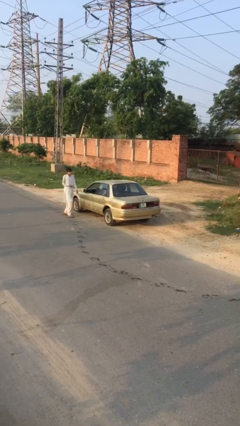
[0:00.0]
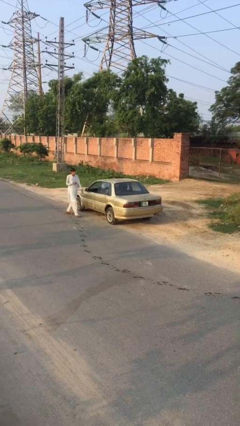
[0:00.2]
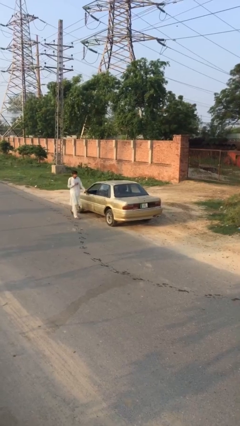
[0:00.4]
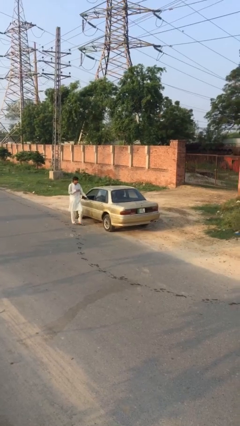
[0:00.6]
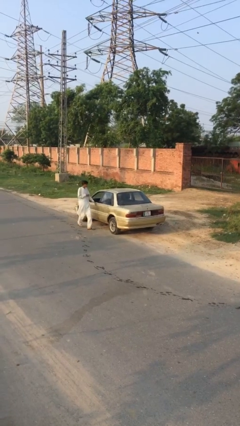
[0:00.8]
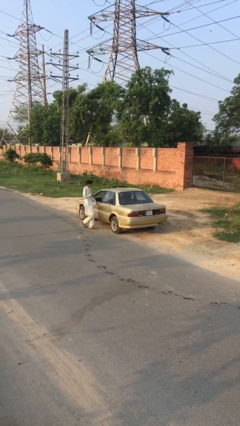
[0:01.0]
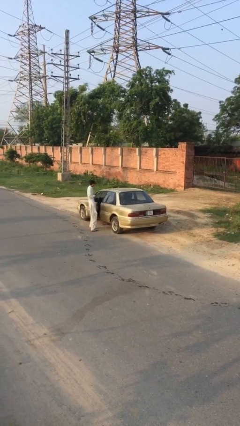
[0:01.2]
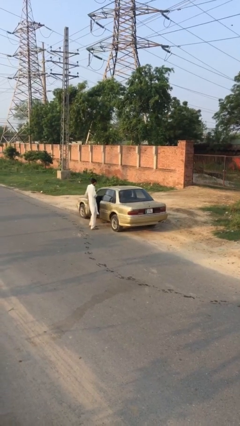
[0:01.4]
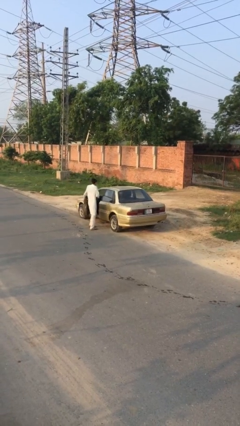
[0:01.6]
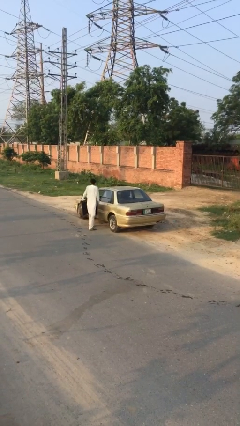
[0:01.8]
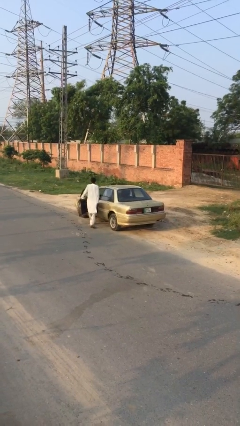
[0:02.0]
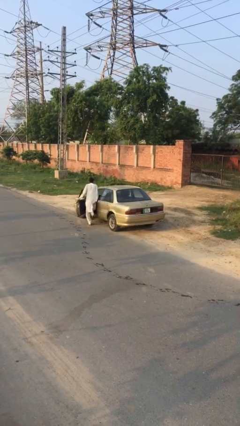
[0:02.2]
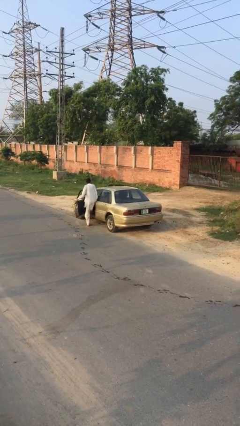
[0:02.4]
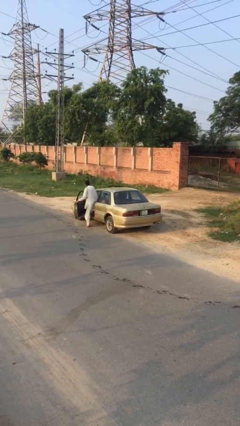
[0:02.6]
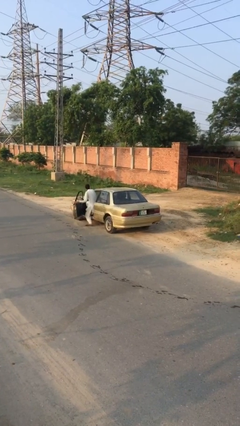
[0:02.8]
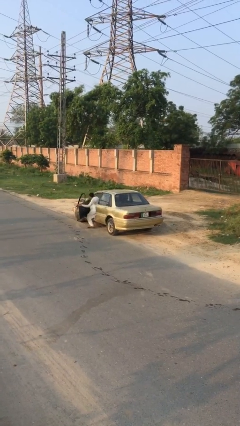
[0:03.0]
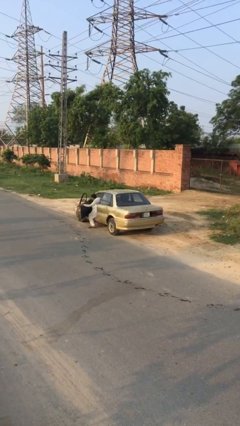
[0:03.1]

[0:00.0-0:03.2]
car picks up person

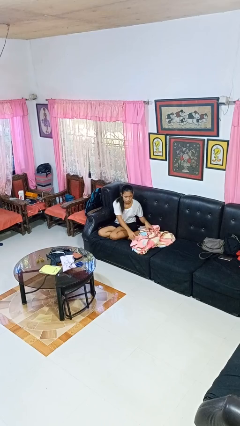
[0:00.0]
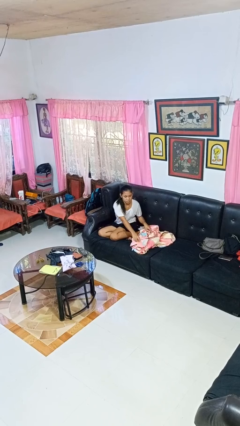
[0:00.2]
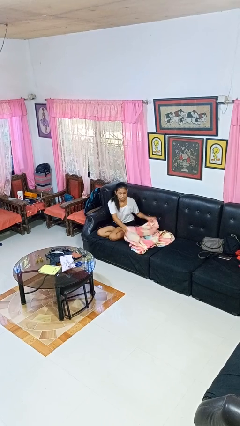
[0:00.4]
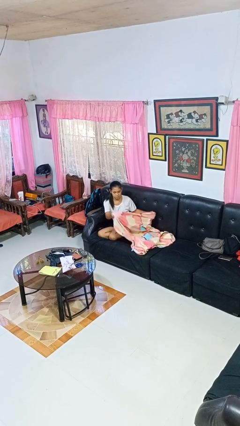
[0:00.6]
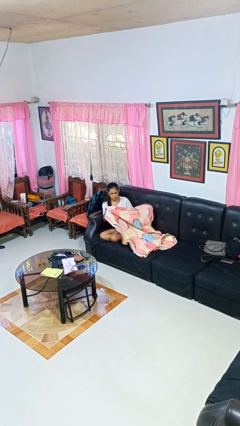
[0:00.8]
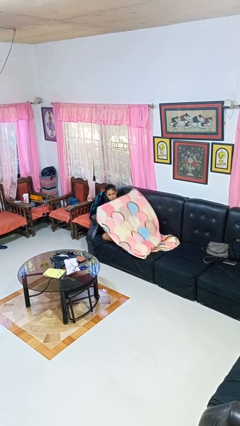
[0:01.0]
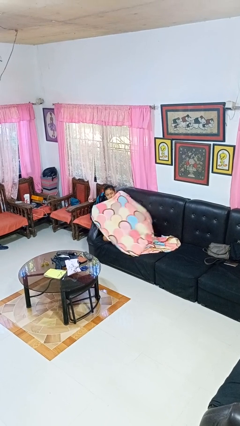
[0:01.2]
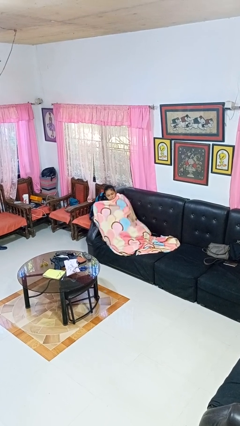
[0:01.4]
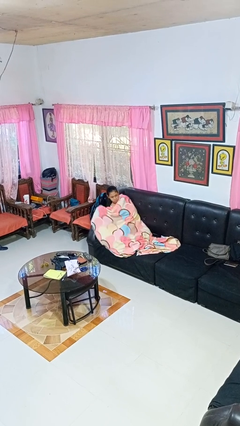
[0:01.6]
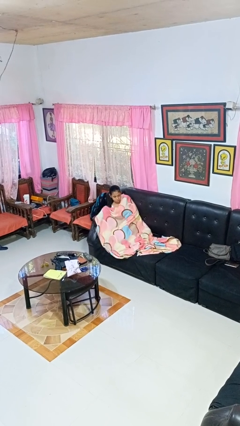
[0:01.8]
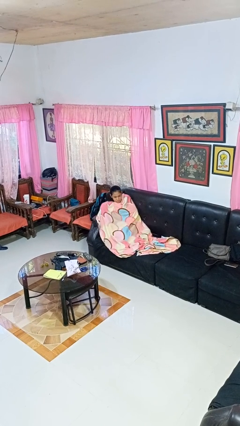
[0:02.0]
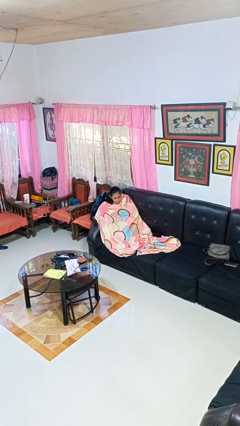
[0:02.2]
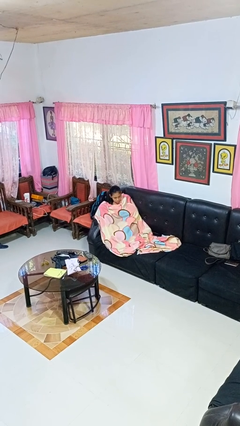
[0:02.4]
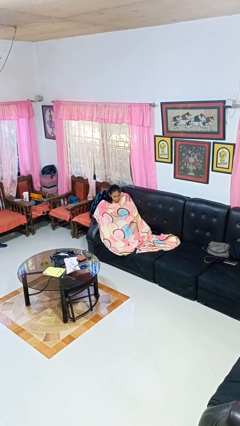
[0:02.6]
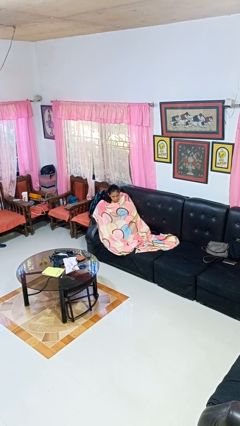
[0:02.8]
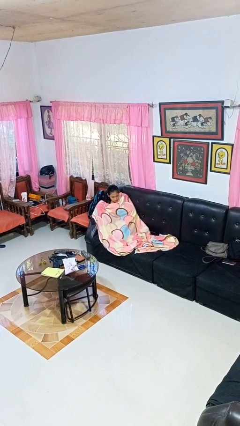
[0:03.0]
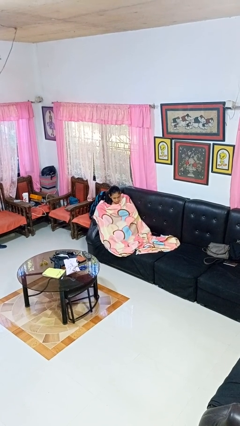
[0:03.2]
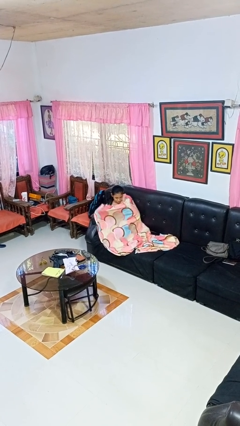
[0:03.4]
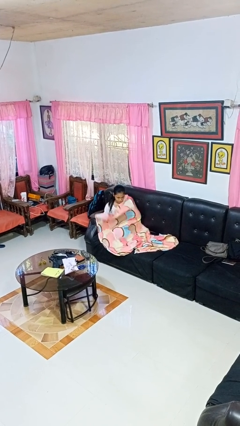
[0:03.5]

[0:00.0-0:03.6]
person covers with blanket

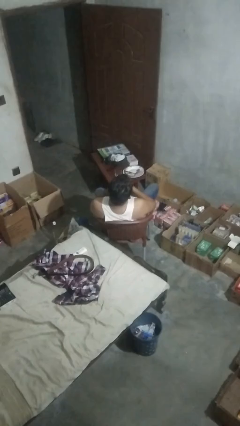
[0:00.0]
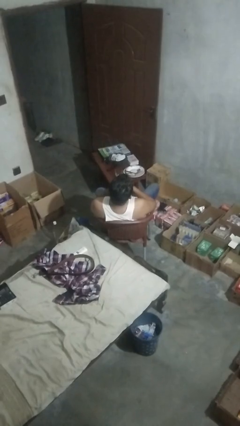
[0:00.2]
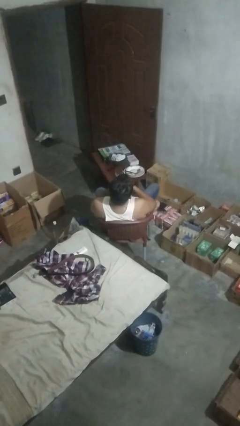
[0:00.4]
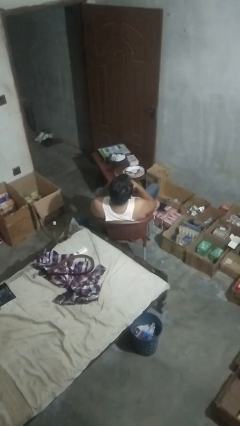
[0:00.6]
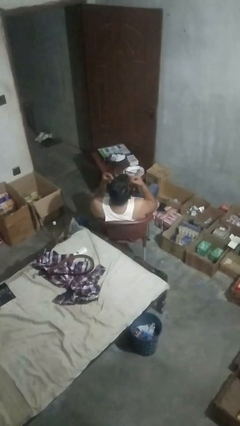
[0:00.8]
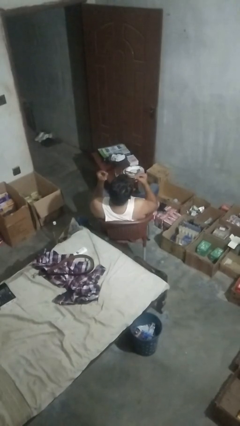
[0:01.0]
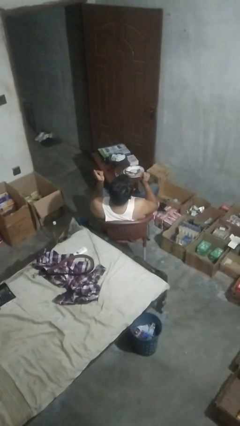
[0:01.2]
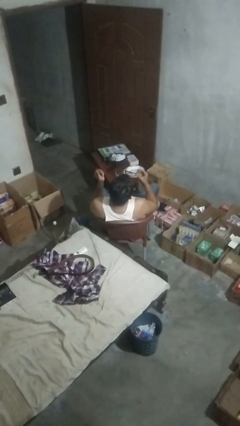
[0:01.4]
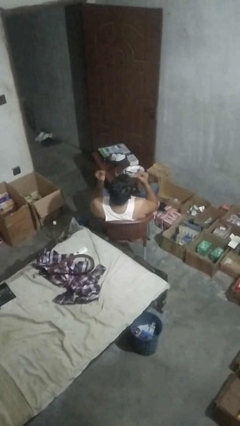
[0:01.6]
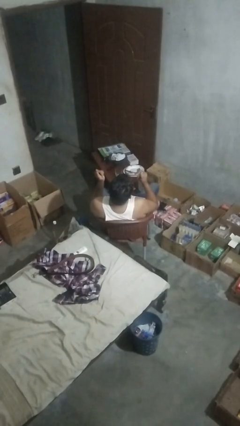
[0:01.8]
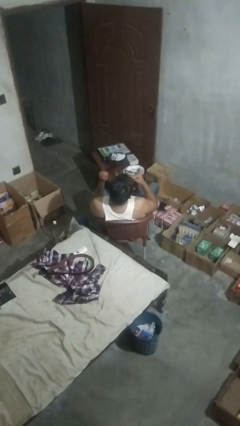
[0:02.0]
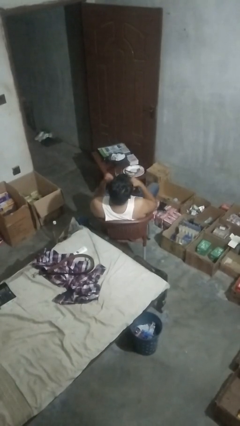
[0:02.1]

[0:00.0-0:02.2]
person snaps fingers

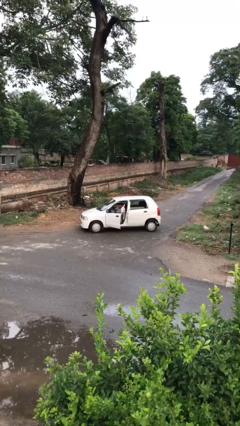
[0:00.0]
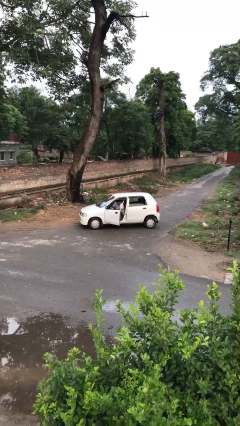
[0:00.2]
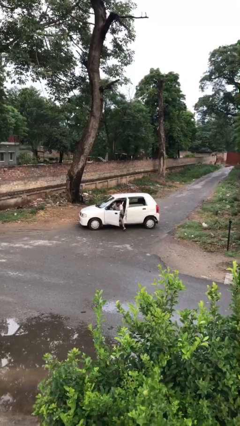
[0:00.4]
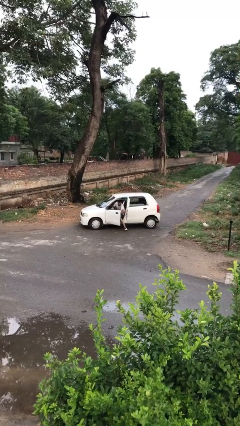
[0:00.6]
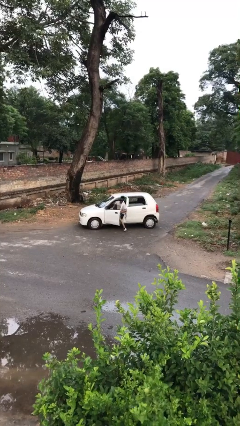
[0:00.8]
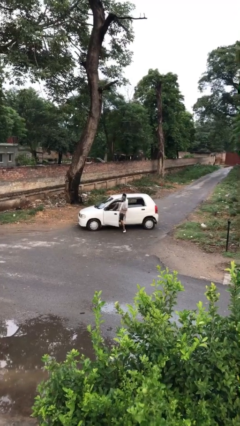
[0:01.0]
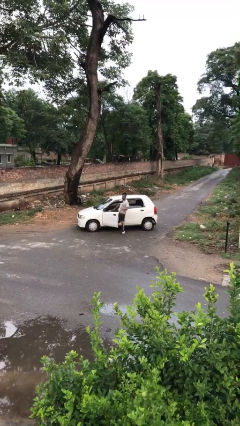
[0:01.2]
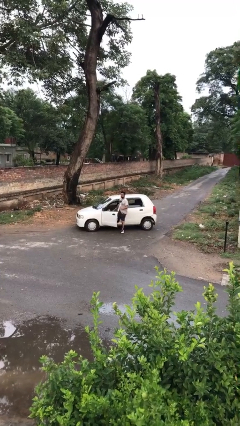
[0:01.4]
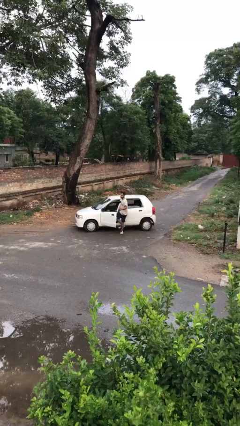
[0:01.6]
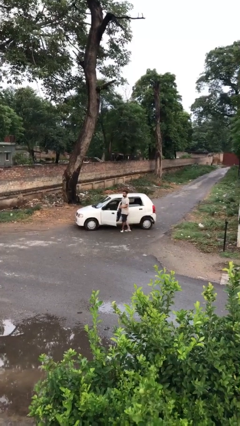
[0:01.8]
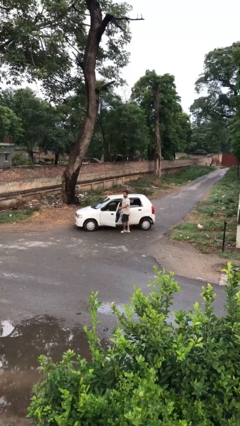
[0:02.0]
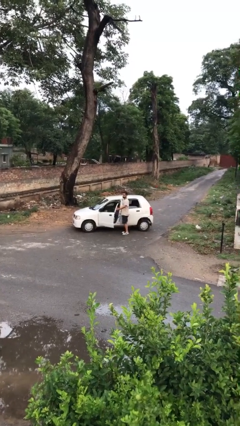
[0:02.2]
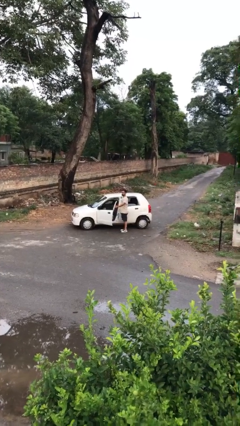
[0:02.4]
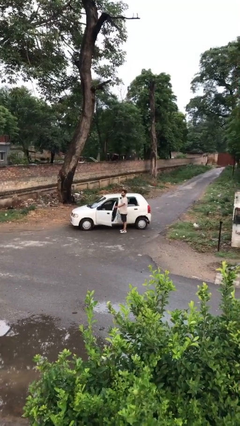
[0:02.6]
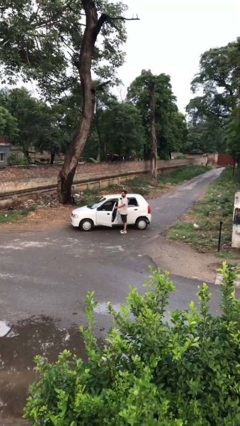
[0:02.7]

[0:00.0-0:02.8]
person exits car

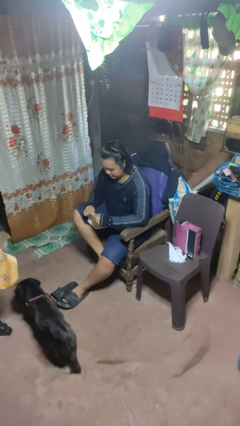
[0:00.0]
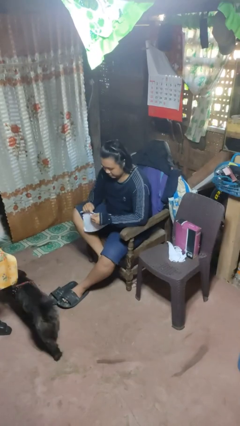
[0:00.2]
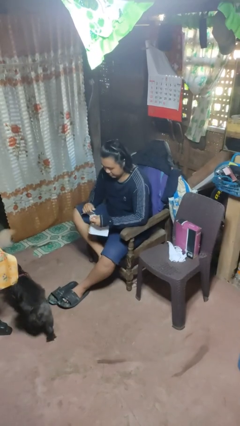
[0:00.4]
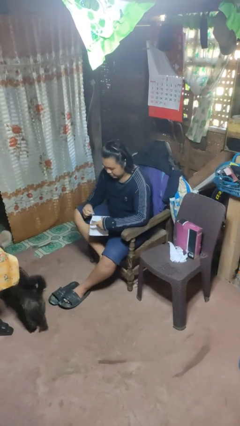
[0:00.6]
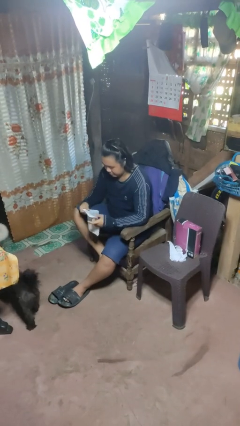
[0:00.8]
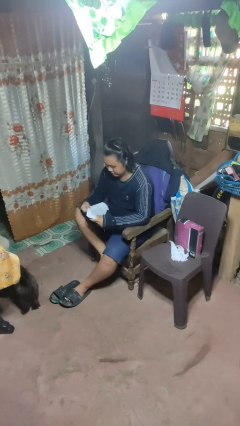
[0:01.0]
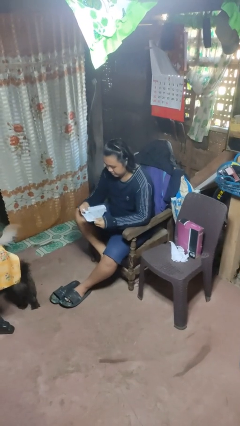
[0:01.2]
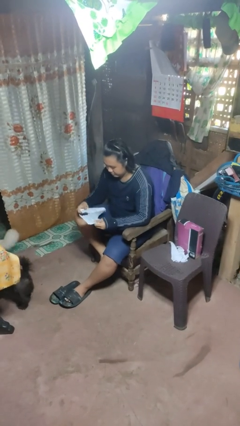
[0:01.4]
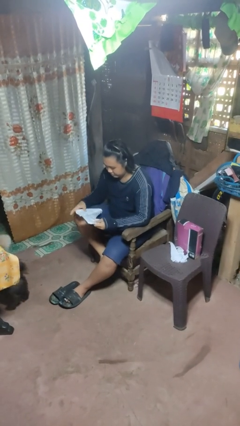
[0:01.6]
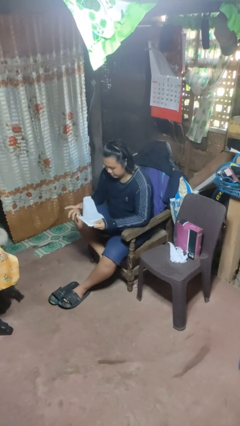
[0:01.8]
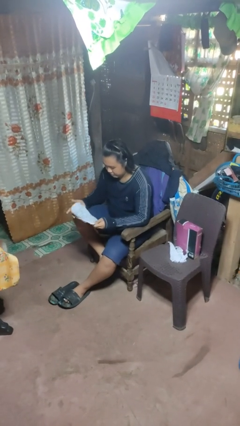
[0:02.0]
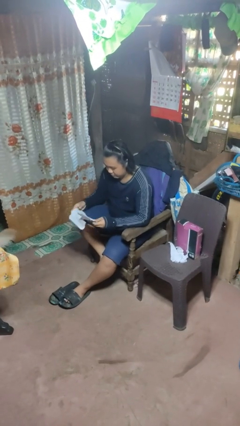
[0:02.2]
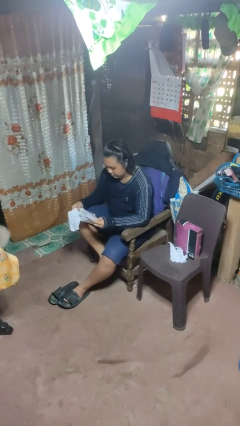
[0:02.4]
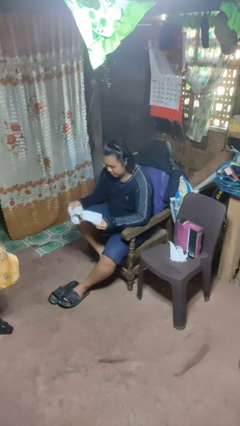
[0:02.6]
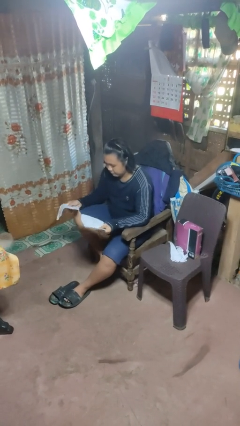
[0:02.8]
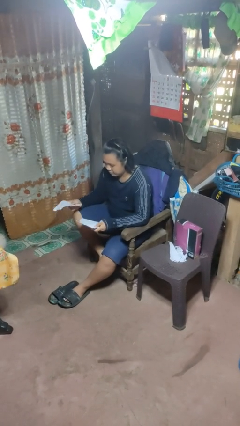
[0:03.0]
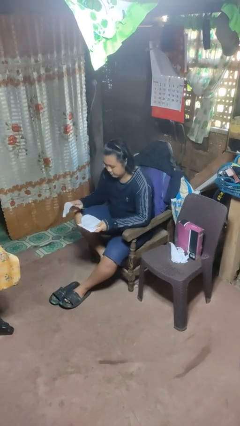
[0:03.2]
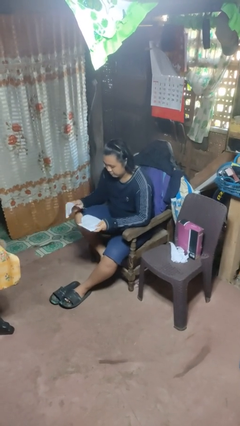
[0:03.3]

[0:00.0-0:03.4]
person tears paper

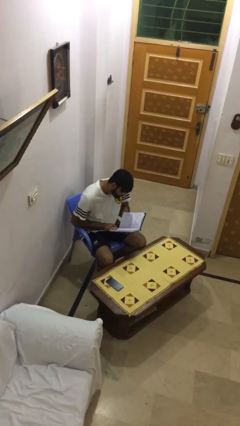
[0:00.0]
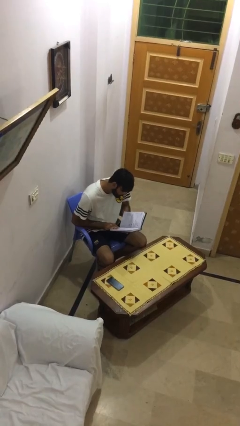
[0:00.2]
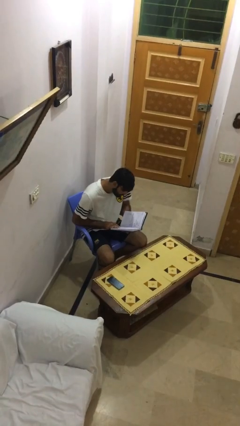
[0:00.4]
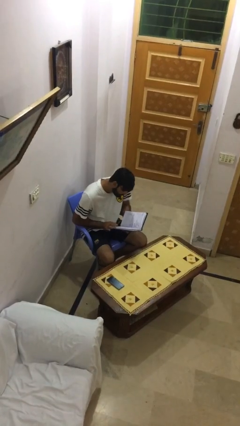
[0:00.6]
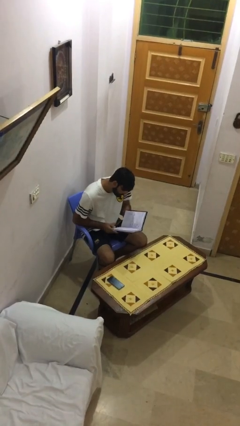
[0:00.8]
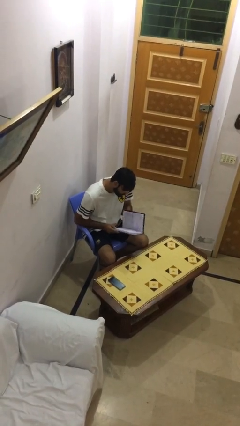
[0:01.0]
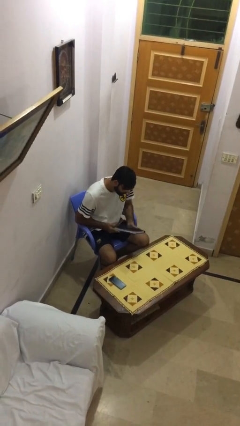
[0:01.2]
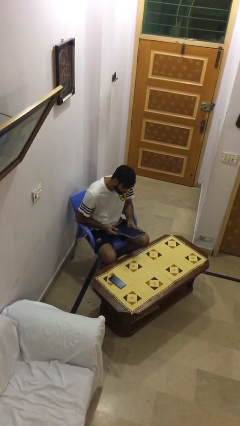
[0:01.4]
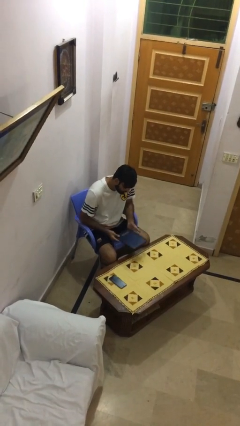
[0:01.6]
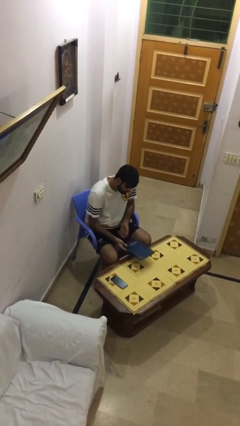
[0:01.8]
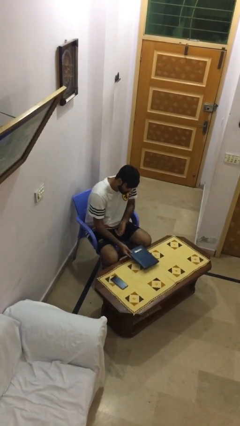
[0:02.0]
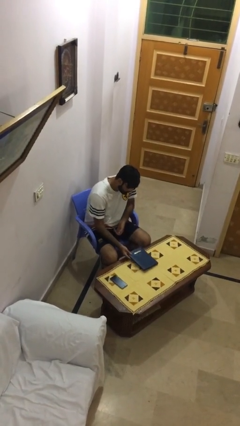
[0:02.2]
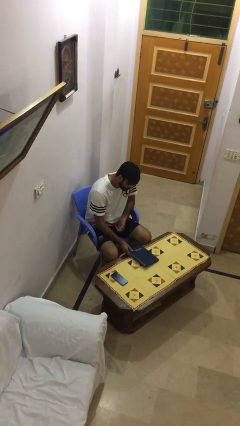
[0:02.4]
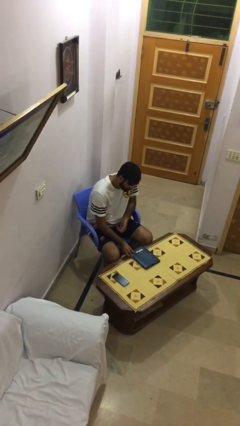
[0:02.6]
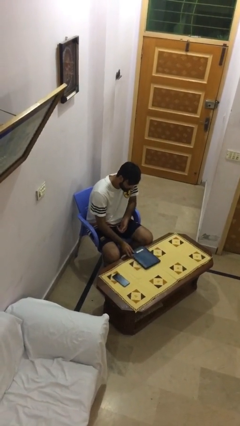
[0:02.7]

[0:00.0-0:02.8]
person puts down object on table
